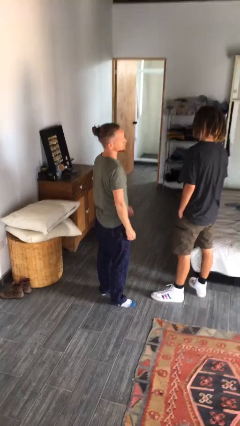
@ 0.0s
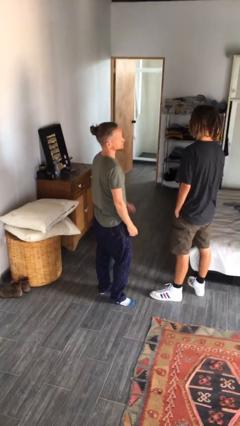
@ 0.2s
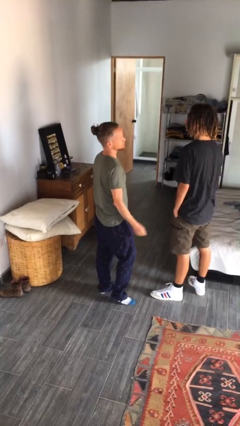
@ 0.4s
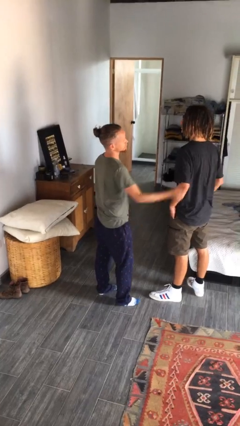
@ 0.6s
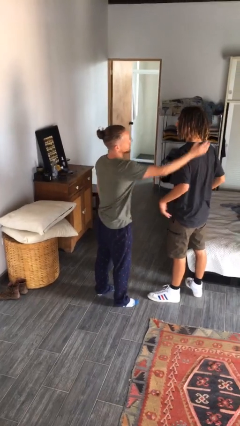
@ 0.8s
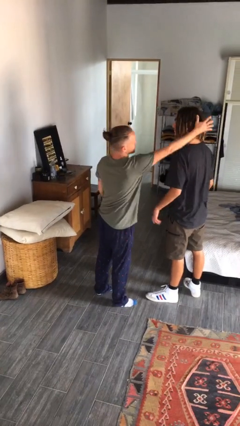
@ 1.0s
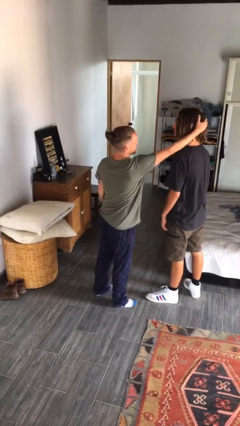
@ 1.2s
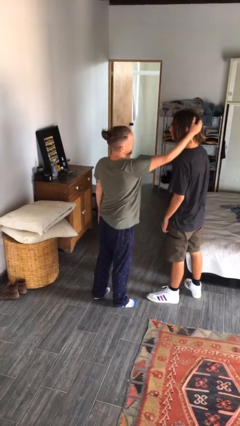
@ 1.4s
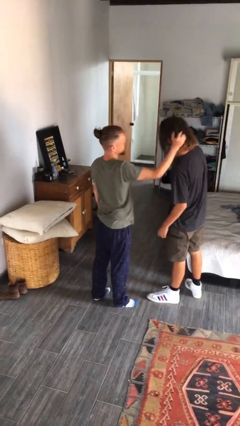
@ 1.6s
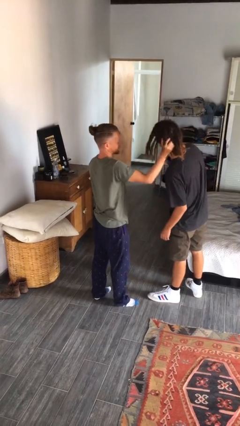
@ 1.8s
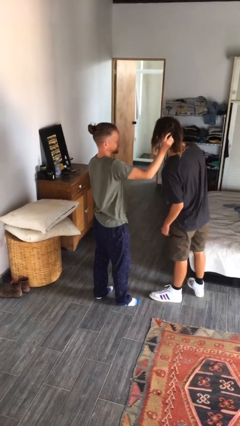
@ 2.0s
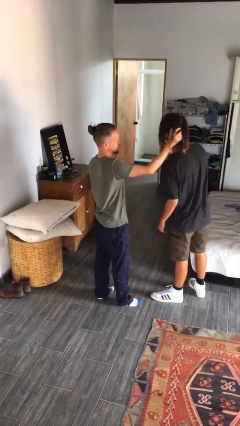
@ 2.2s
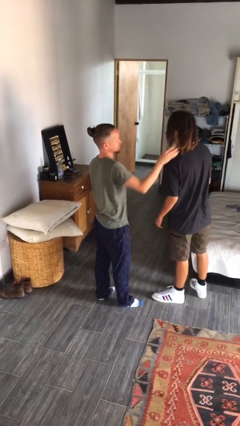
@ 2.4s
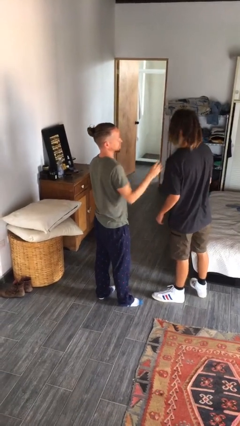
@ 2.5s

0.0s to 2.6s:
person grabs person by hair

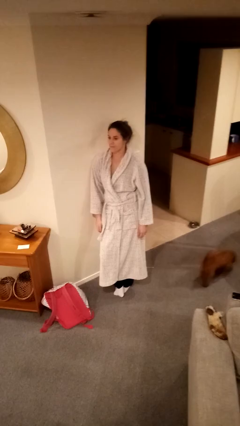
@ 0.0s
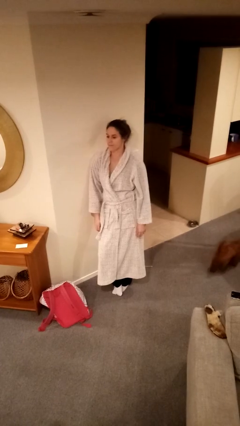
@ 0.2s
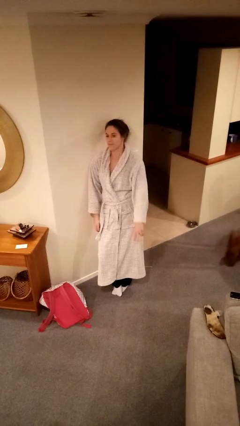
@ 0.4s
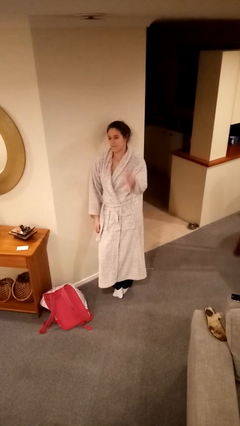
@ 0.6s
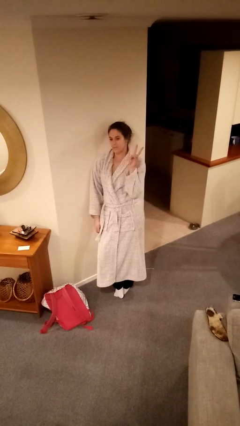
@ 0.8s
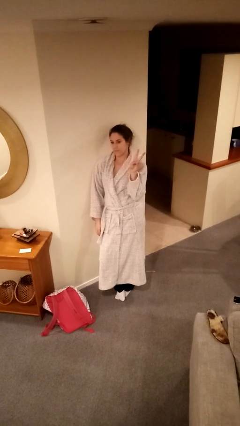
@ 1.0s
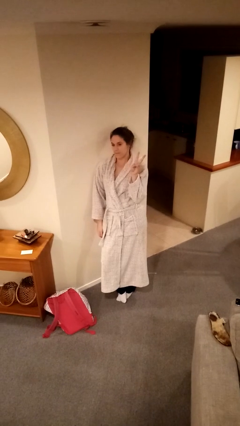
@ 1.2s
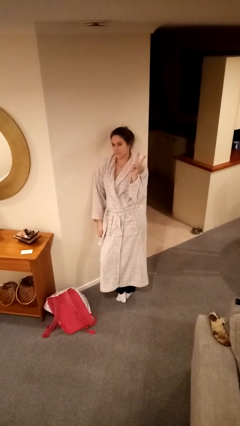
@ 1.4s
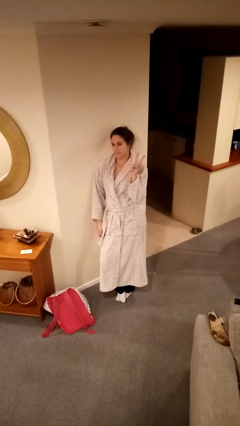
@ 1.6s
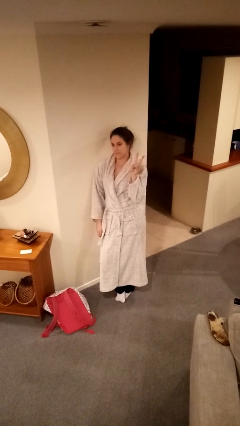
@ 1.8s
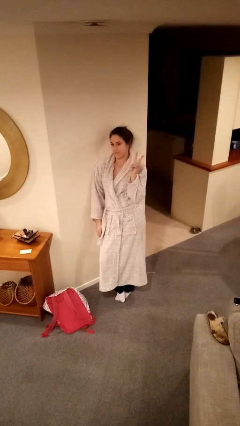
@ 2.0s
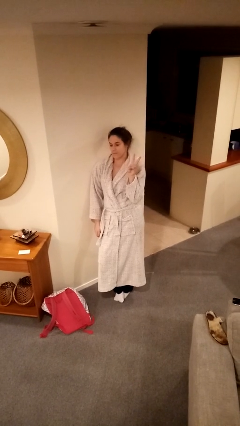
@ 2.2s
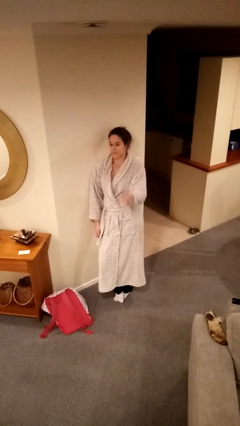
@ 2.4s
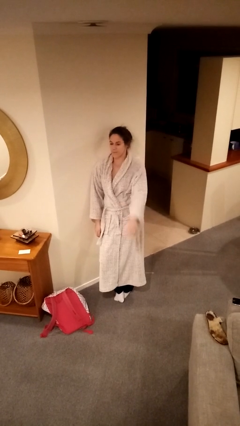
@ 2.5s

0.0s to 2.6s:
person gestures peace

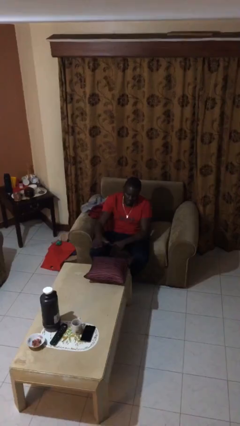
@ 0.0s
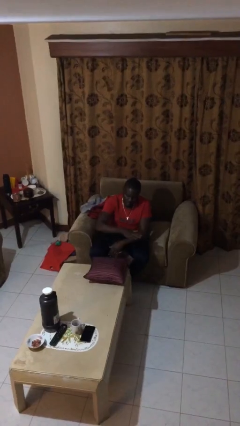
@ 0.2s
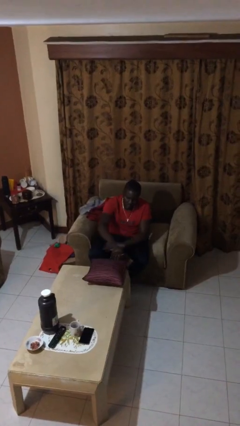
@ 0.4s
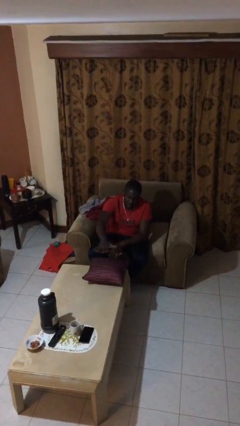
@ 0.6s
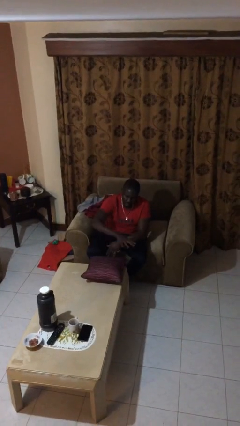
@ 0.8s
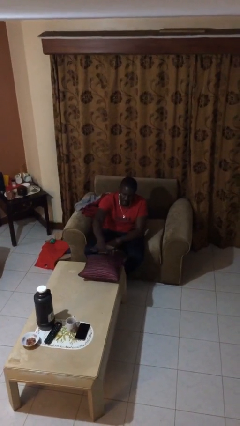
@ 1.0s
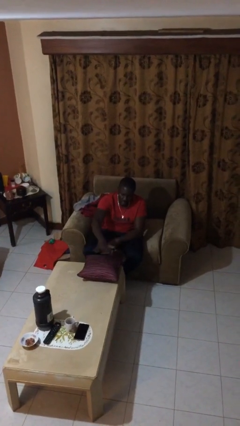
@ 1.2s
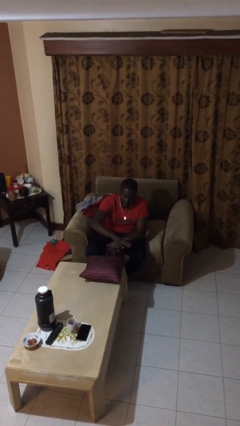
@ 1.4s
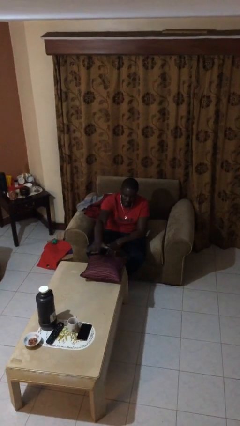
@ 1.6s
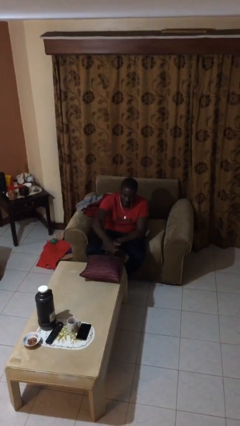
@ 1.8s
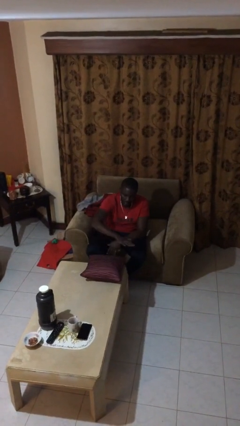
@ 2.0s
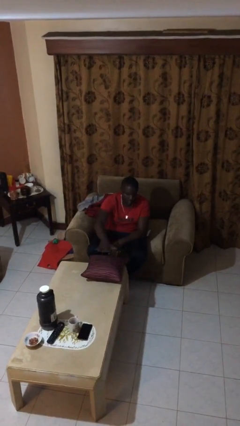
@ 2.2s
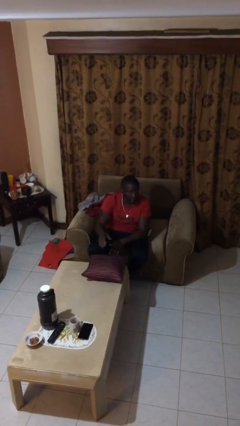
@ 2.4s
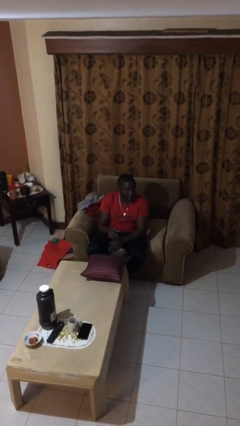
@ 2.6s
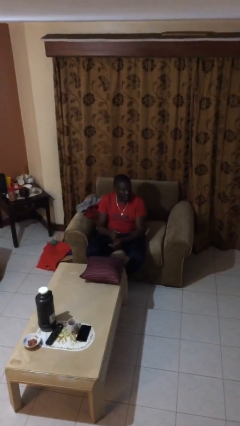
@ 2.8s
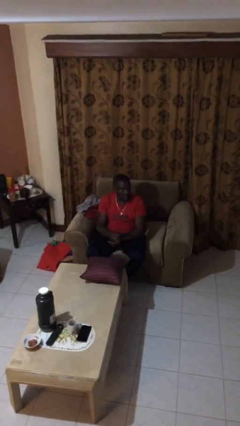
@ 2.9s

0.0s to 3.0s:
person waves hand over object

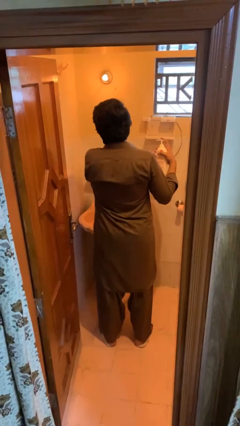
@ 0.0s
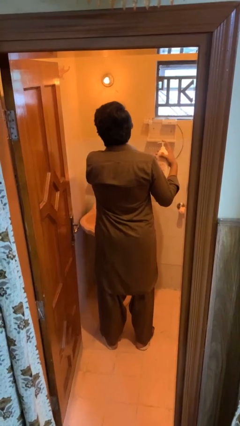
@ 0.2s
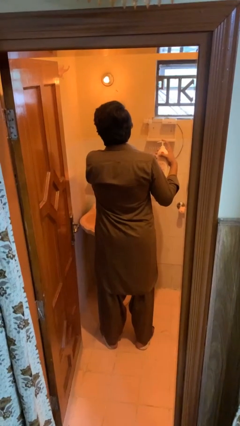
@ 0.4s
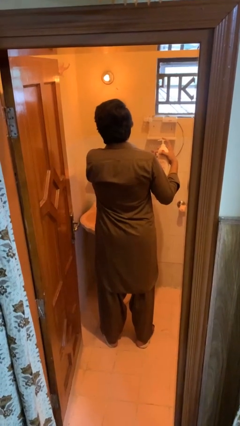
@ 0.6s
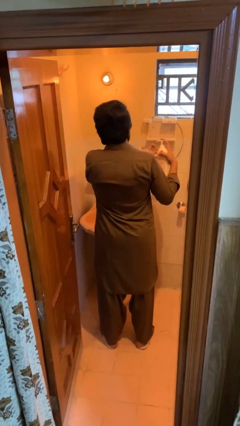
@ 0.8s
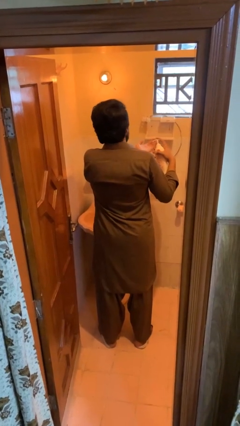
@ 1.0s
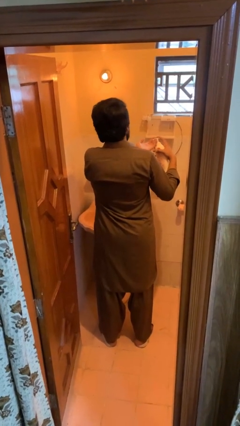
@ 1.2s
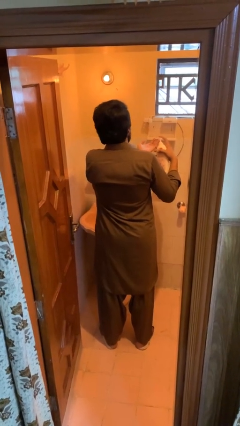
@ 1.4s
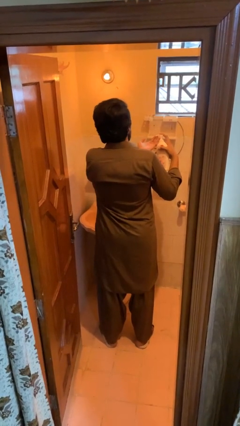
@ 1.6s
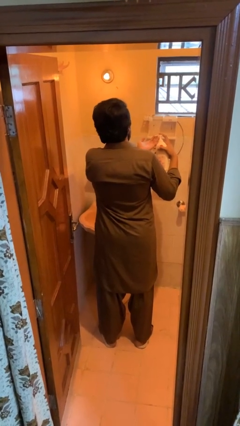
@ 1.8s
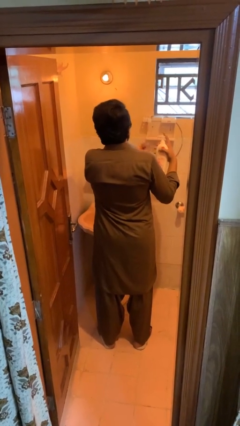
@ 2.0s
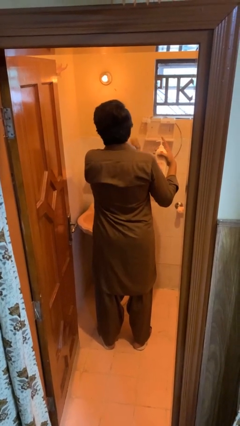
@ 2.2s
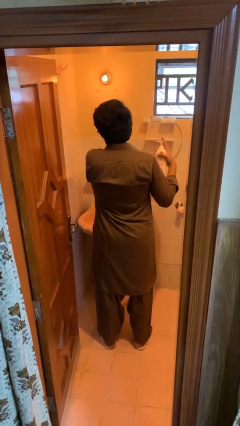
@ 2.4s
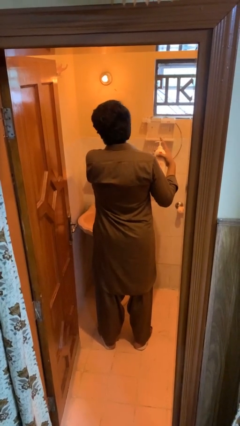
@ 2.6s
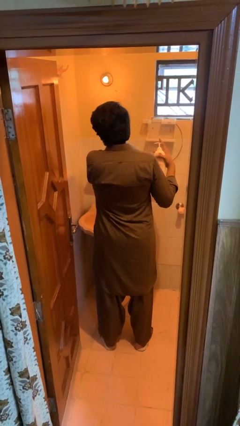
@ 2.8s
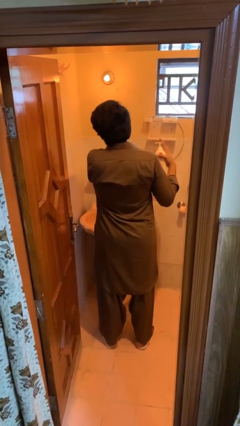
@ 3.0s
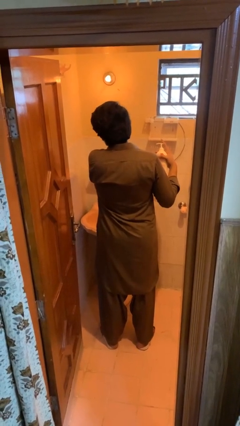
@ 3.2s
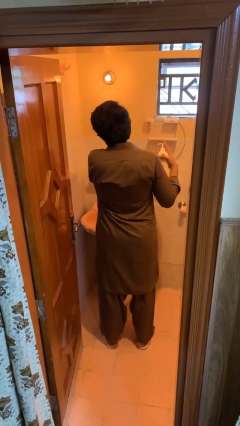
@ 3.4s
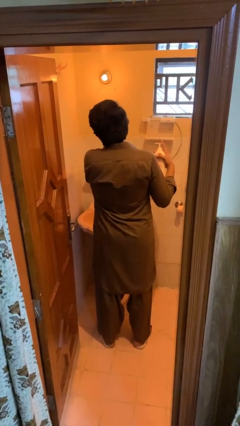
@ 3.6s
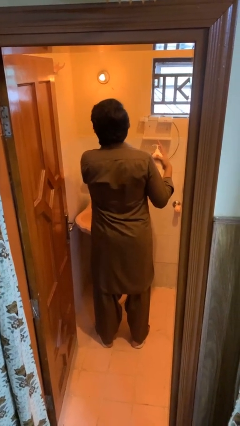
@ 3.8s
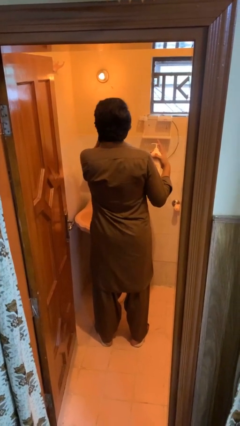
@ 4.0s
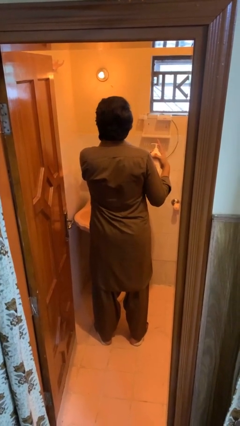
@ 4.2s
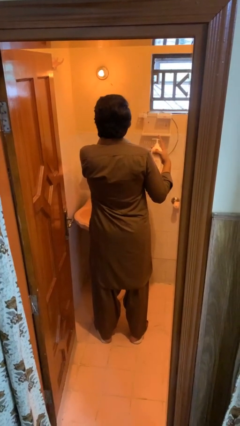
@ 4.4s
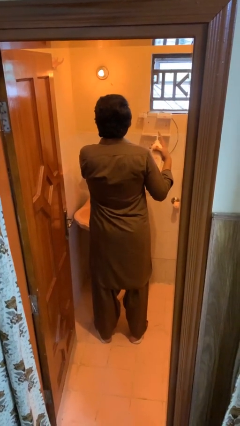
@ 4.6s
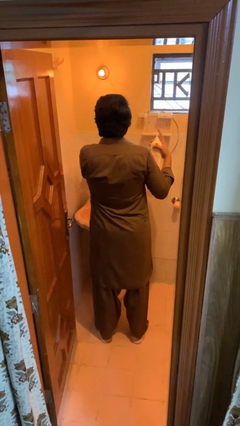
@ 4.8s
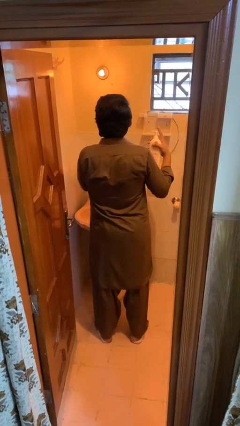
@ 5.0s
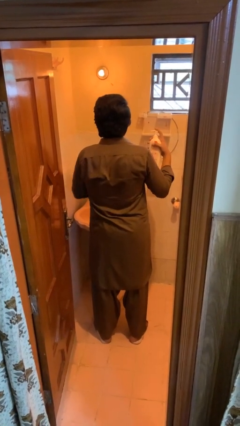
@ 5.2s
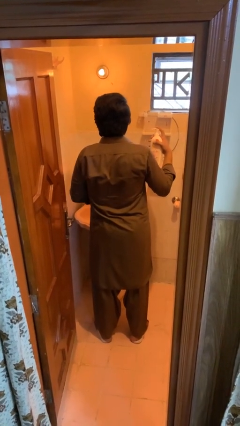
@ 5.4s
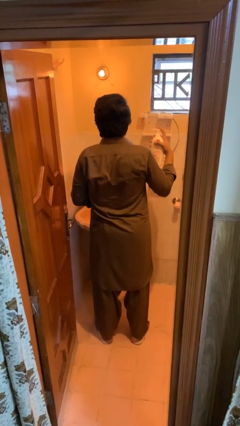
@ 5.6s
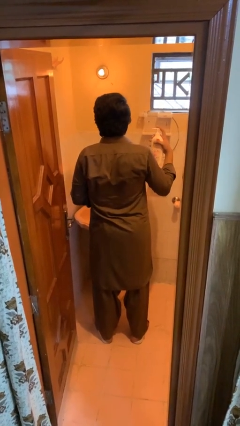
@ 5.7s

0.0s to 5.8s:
person applies sunscreen

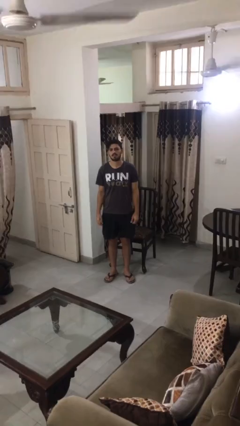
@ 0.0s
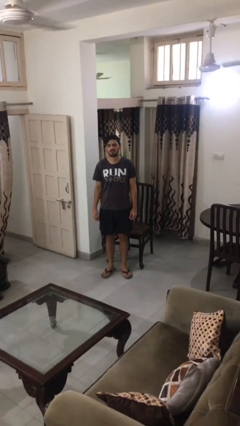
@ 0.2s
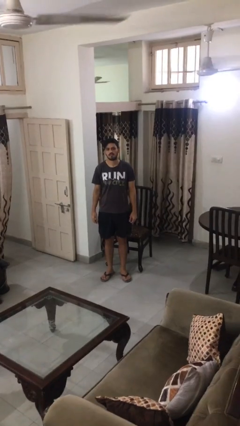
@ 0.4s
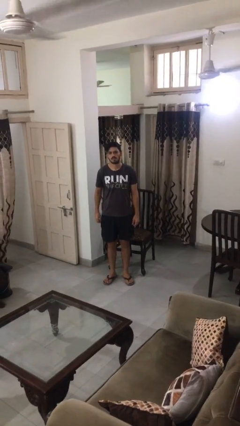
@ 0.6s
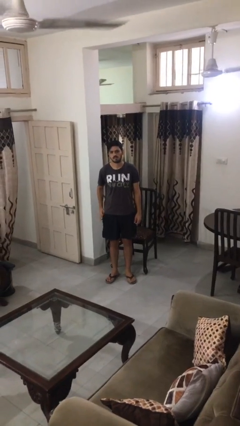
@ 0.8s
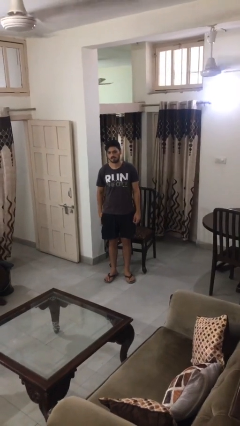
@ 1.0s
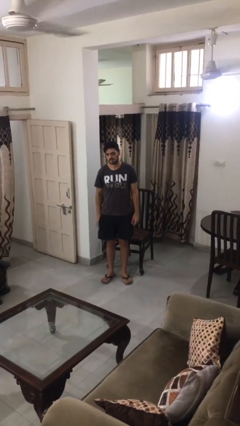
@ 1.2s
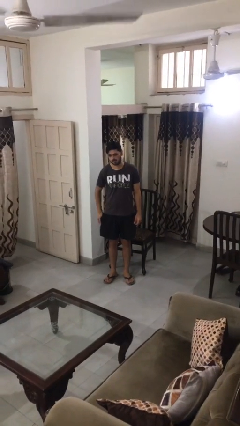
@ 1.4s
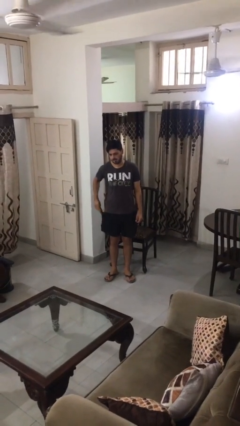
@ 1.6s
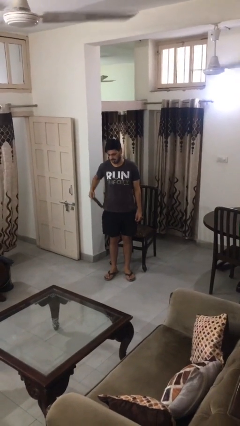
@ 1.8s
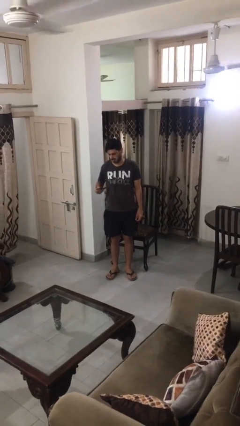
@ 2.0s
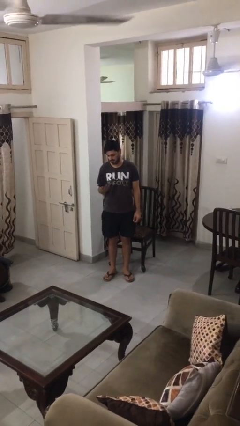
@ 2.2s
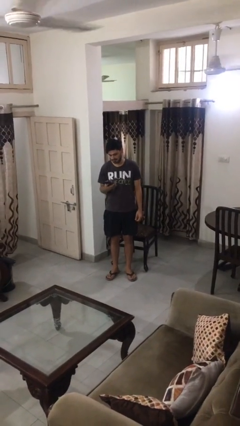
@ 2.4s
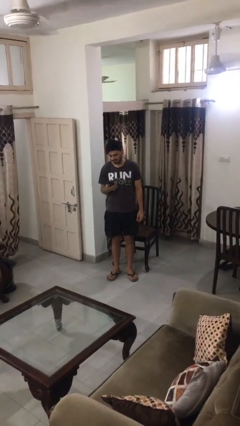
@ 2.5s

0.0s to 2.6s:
person takes phone from pocket

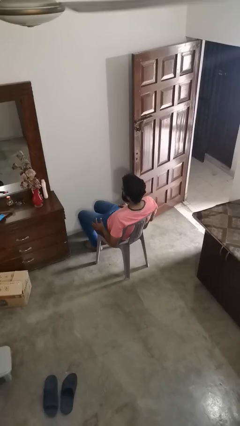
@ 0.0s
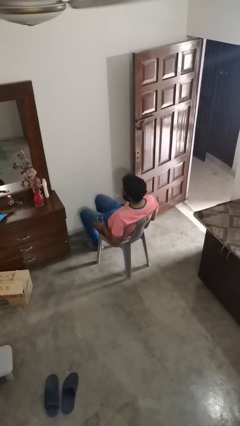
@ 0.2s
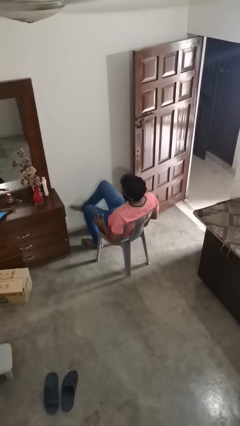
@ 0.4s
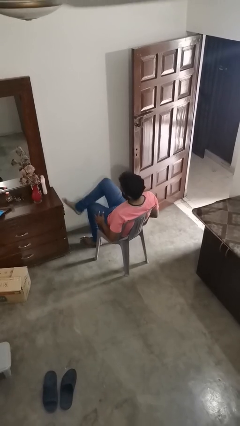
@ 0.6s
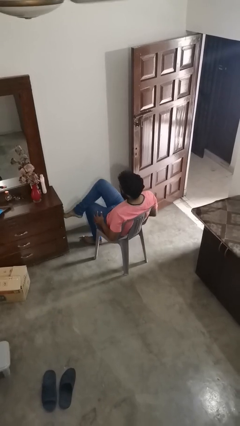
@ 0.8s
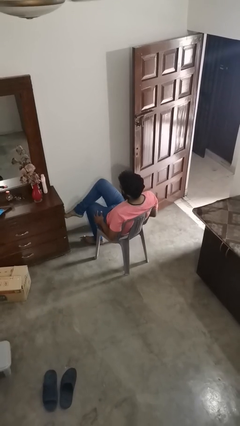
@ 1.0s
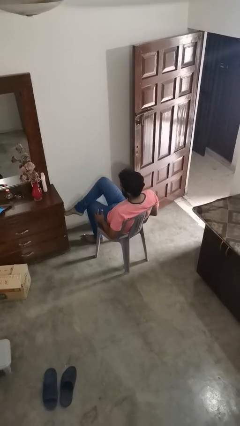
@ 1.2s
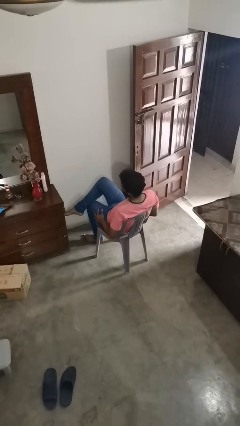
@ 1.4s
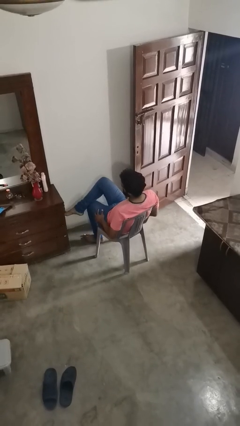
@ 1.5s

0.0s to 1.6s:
person crosses legs
